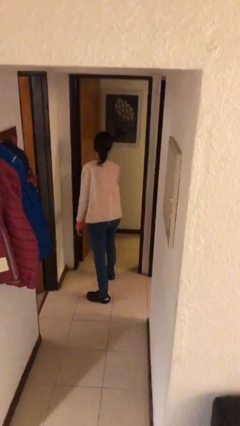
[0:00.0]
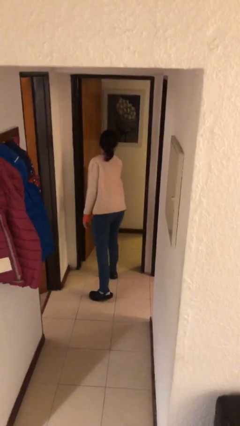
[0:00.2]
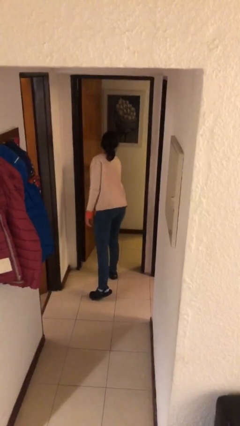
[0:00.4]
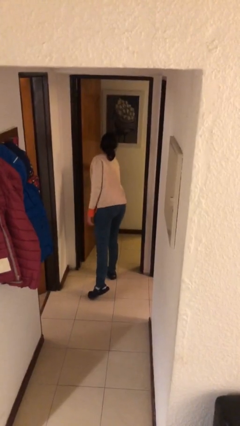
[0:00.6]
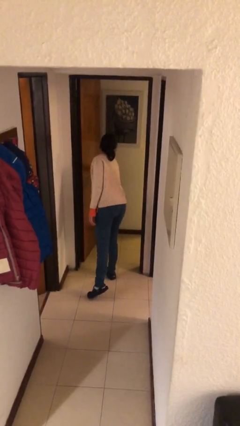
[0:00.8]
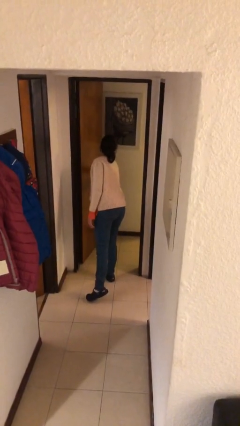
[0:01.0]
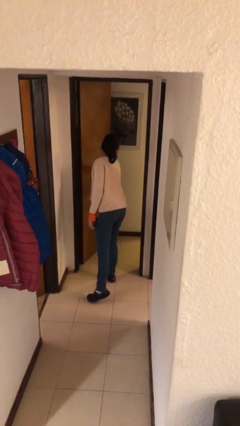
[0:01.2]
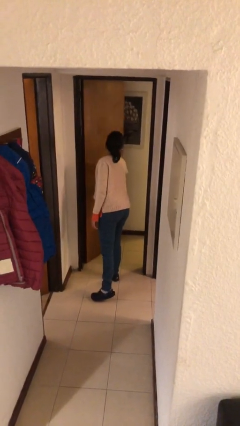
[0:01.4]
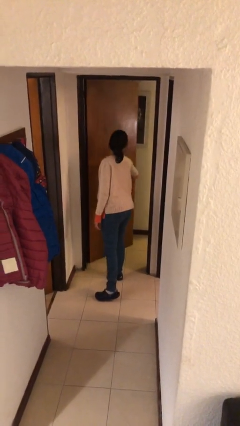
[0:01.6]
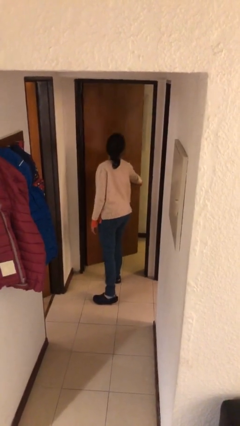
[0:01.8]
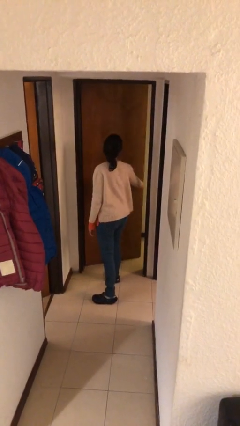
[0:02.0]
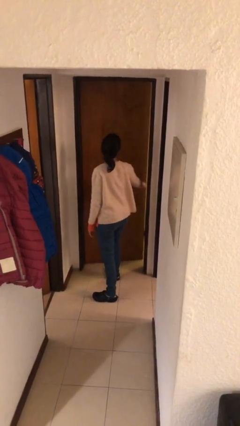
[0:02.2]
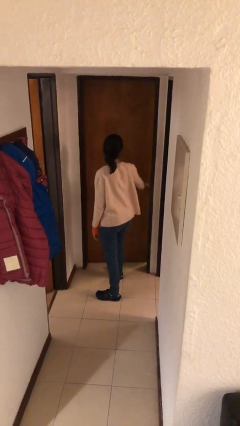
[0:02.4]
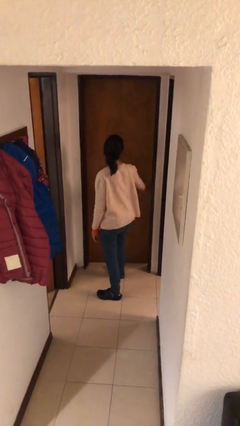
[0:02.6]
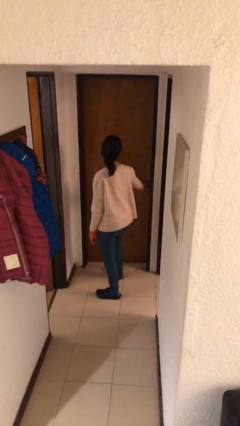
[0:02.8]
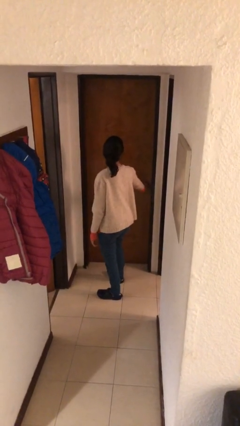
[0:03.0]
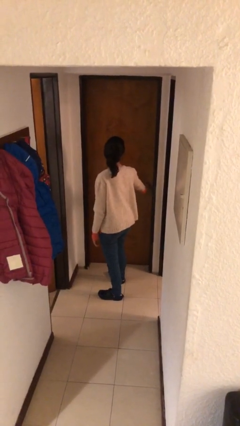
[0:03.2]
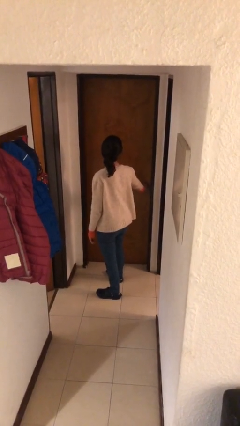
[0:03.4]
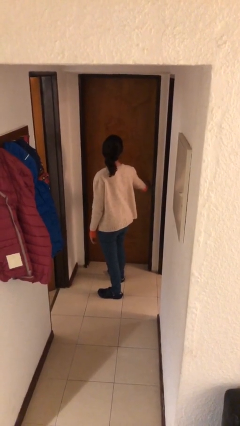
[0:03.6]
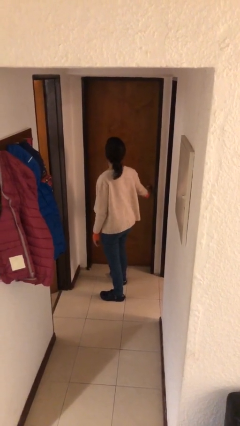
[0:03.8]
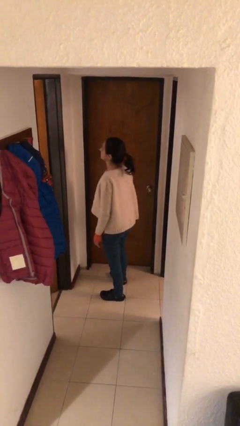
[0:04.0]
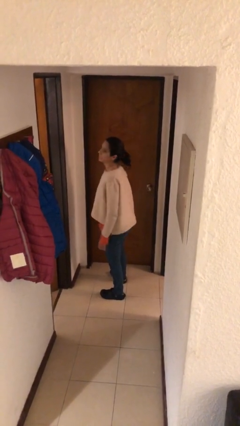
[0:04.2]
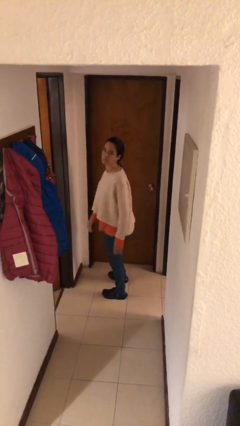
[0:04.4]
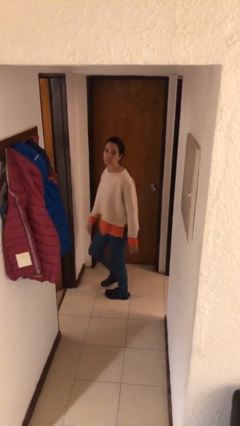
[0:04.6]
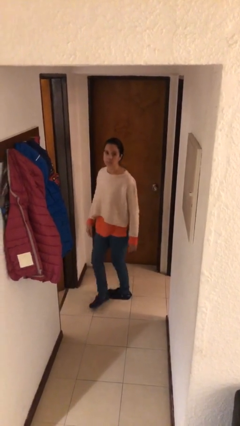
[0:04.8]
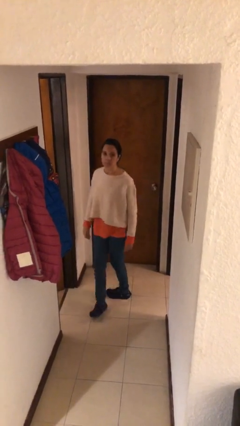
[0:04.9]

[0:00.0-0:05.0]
person closes facility door

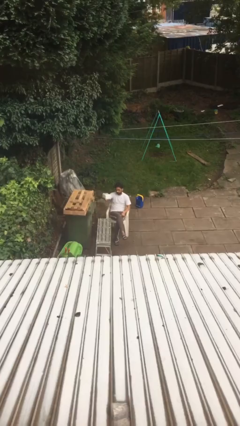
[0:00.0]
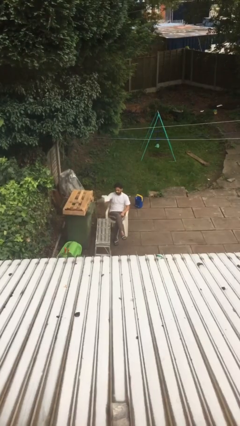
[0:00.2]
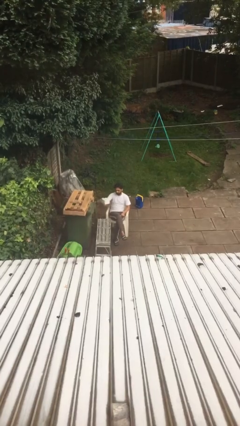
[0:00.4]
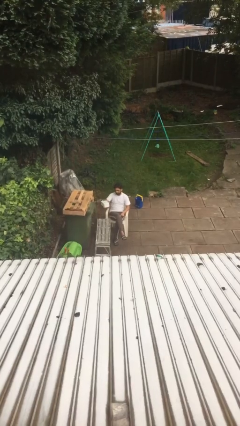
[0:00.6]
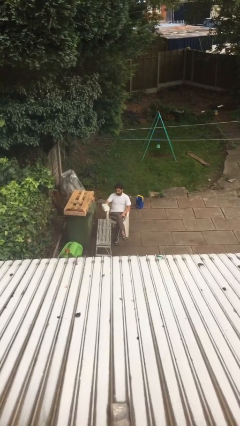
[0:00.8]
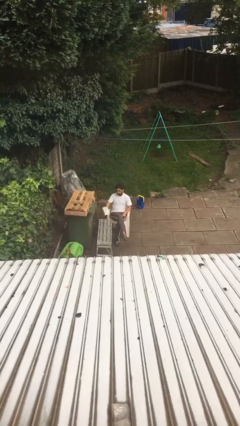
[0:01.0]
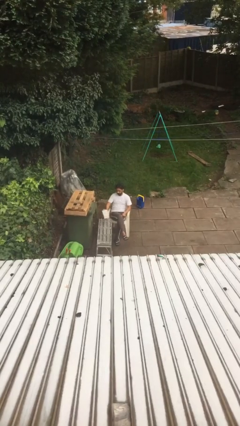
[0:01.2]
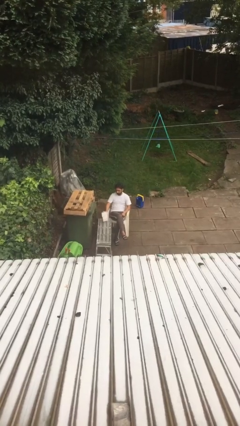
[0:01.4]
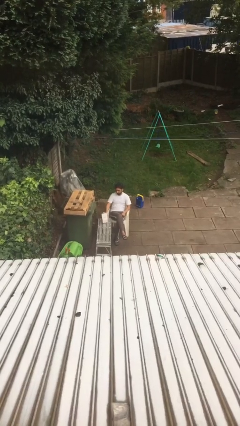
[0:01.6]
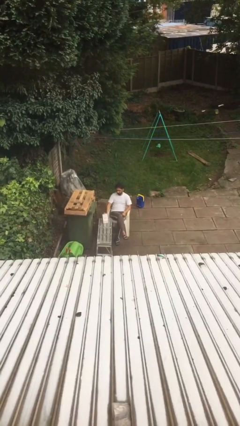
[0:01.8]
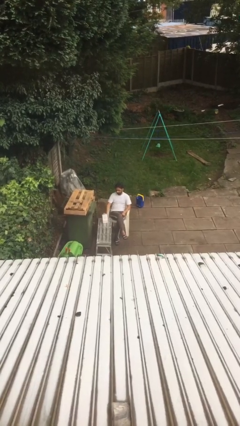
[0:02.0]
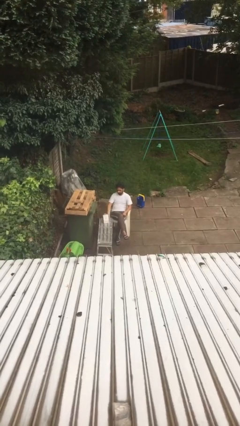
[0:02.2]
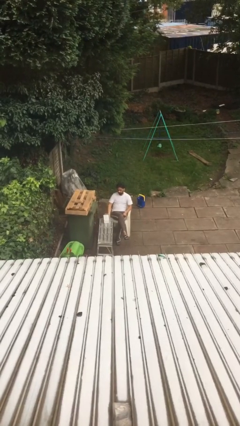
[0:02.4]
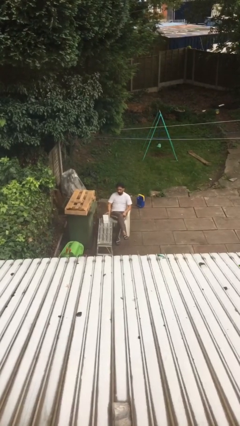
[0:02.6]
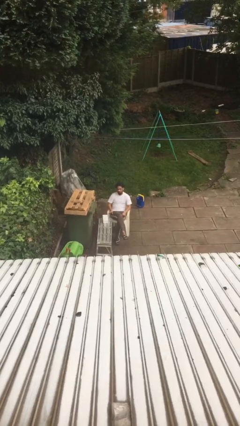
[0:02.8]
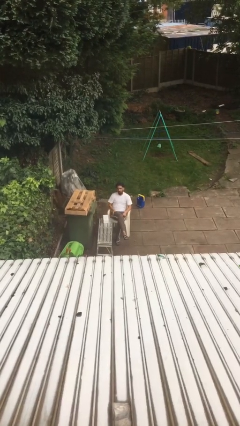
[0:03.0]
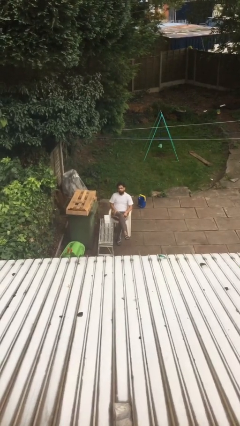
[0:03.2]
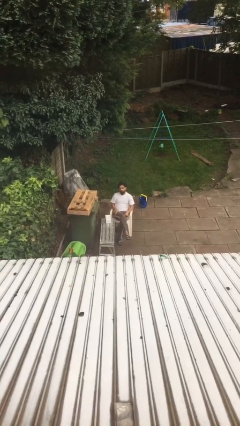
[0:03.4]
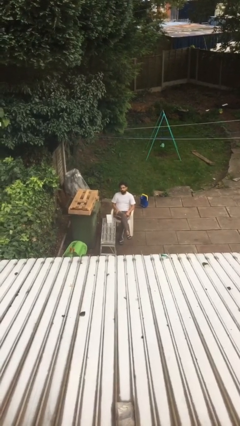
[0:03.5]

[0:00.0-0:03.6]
person puts down object on table

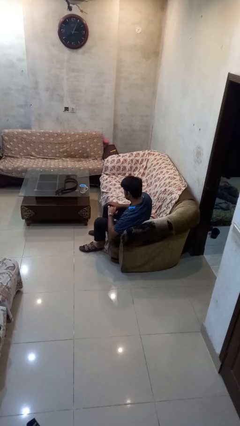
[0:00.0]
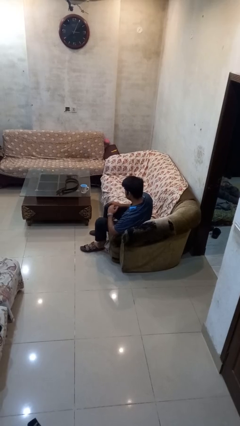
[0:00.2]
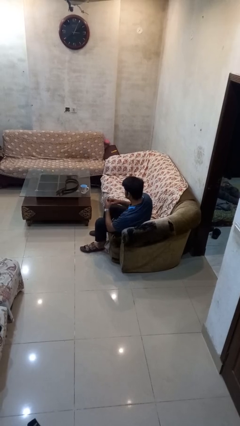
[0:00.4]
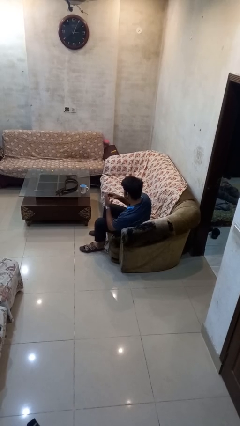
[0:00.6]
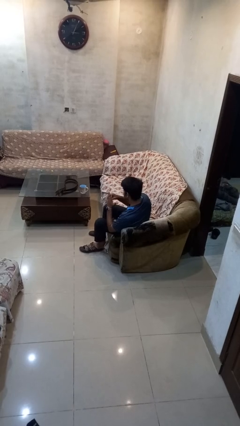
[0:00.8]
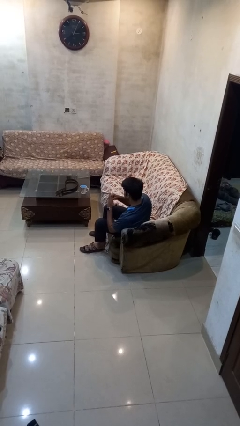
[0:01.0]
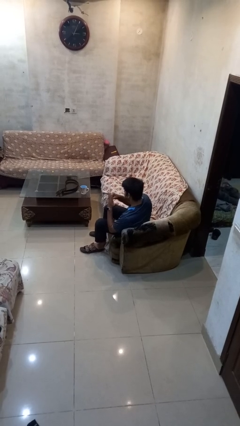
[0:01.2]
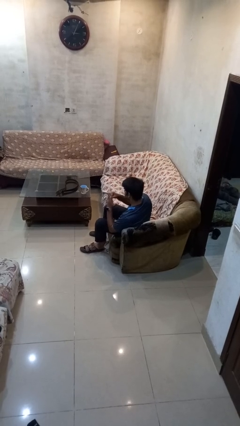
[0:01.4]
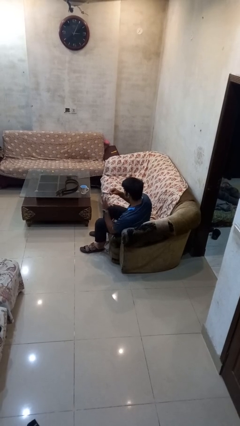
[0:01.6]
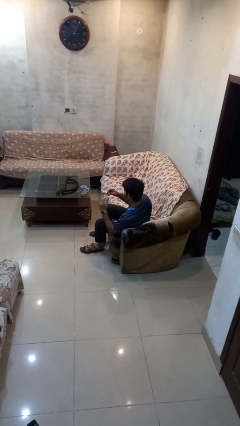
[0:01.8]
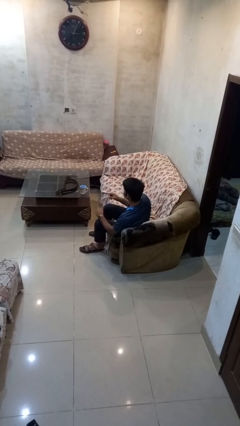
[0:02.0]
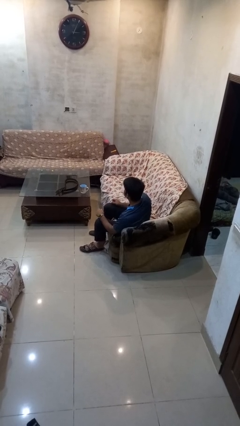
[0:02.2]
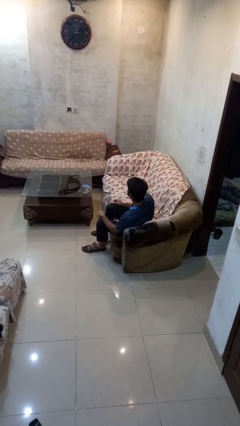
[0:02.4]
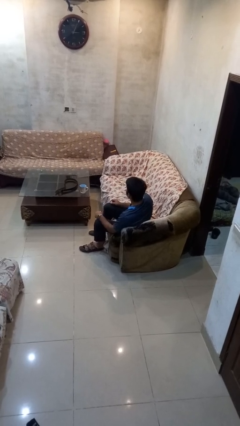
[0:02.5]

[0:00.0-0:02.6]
person takes off ring

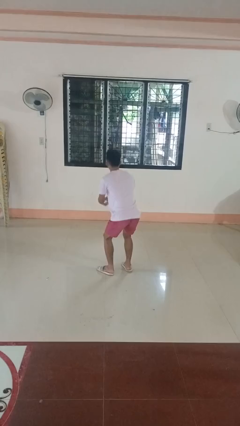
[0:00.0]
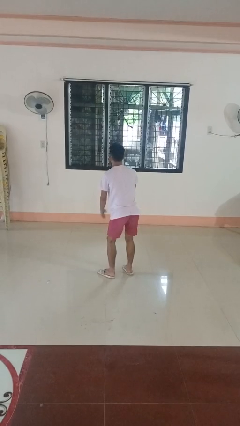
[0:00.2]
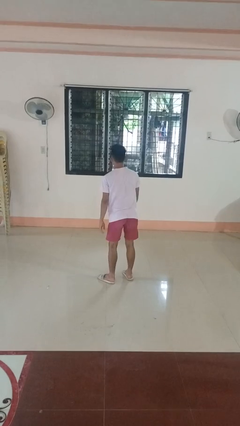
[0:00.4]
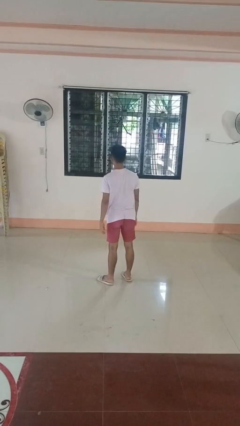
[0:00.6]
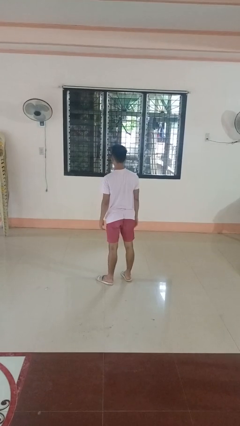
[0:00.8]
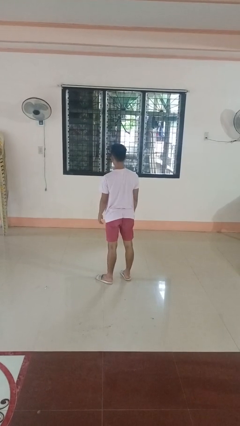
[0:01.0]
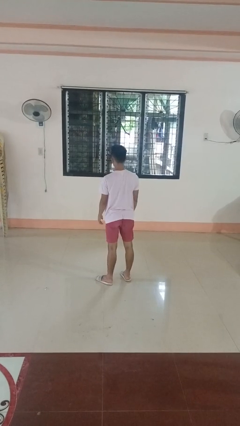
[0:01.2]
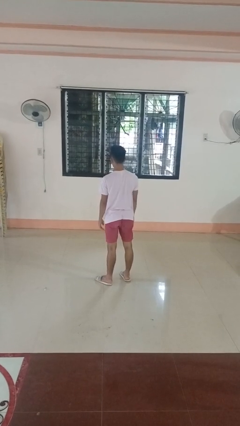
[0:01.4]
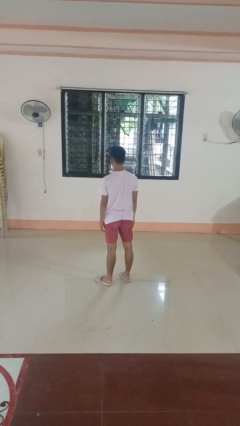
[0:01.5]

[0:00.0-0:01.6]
person stands up

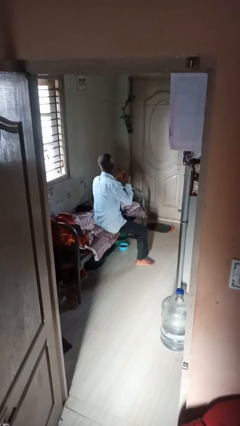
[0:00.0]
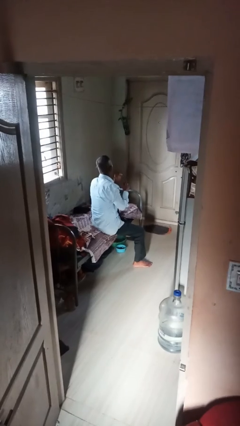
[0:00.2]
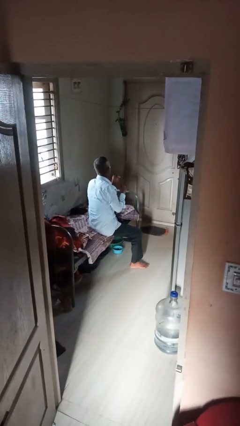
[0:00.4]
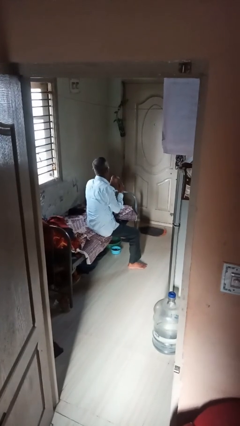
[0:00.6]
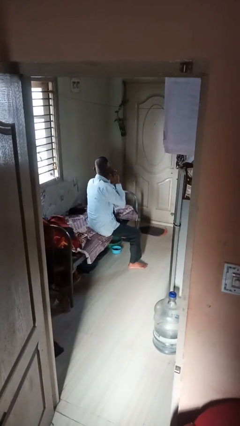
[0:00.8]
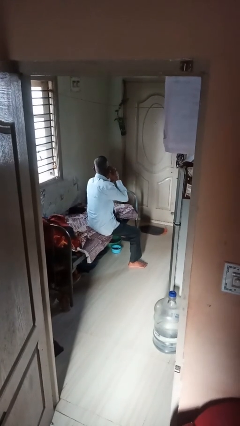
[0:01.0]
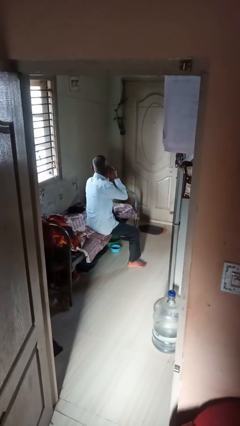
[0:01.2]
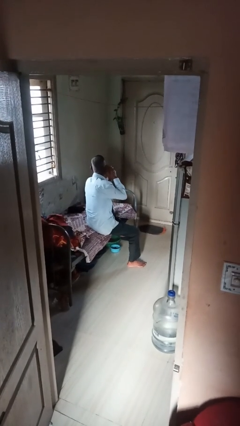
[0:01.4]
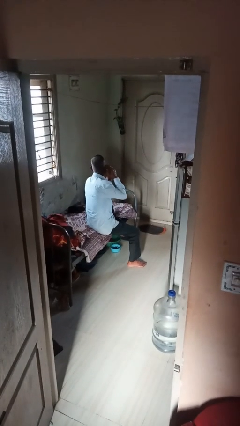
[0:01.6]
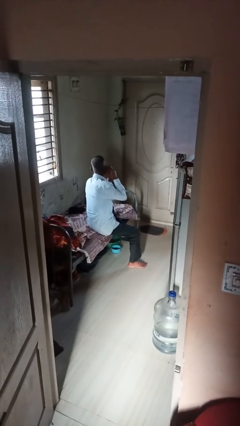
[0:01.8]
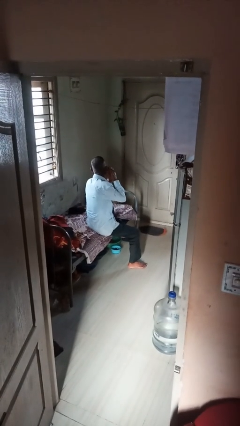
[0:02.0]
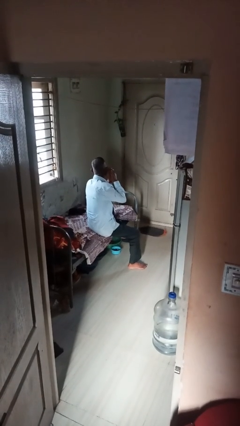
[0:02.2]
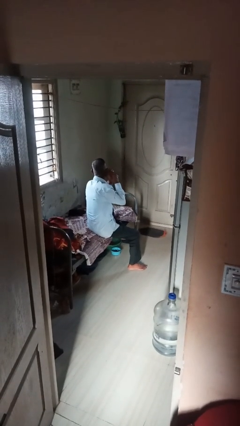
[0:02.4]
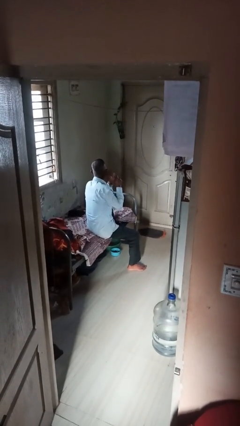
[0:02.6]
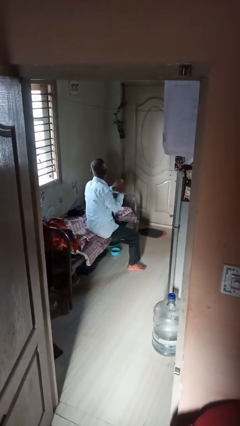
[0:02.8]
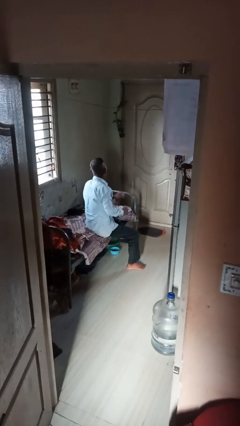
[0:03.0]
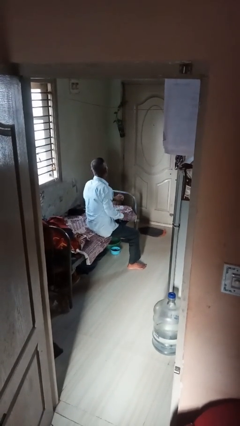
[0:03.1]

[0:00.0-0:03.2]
person takes off earrings

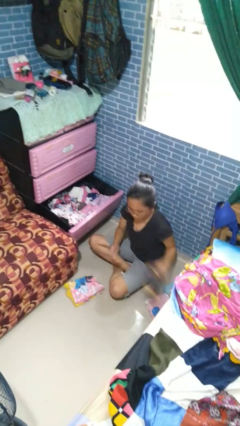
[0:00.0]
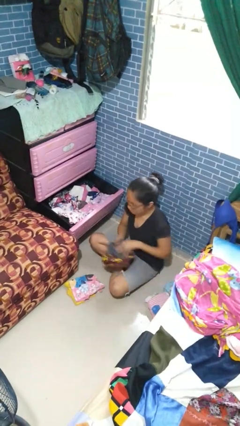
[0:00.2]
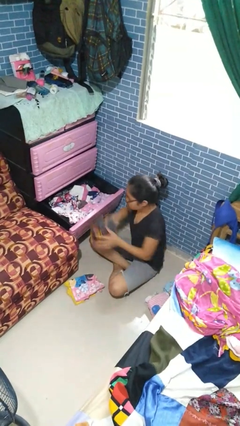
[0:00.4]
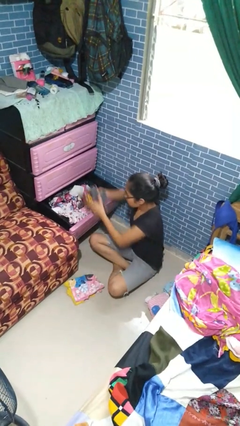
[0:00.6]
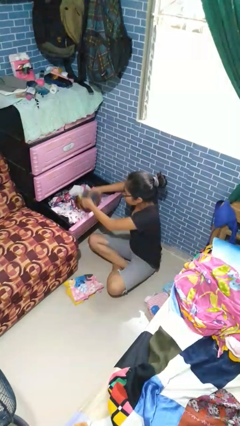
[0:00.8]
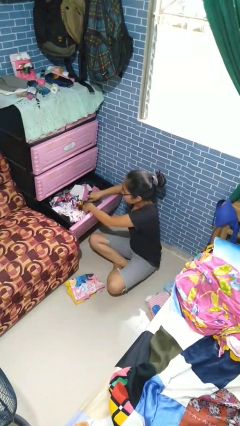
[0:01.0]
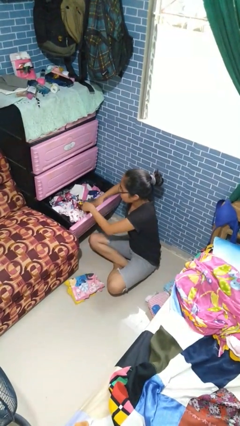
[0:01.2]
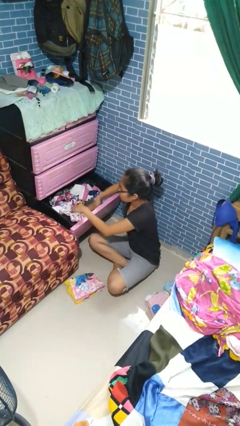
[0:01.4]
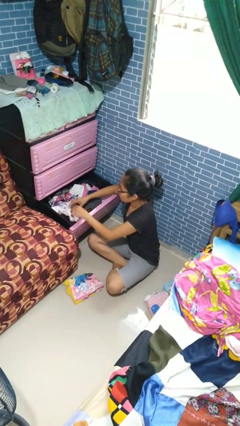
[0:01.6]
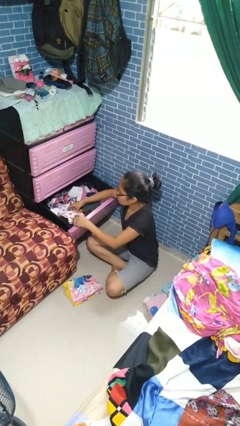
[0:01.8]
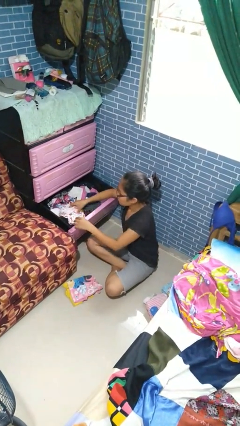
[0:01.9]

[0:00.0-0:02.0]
person puts clothes into dresser
